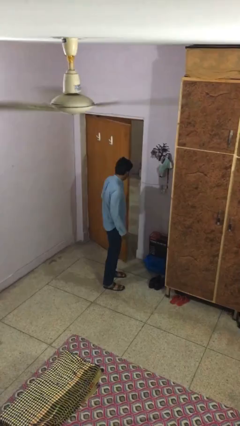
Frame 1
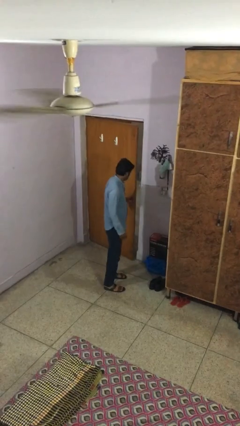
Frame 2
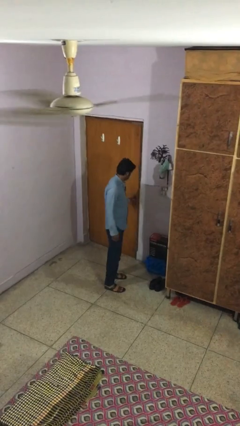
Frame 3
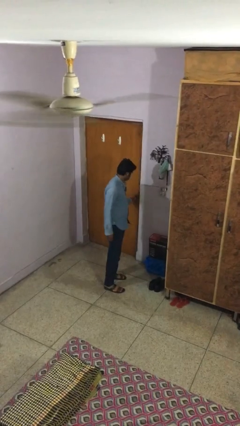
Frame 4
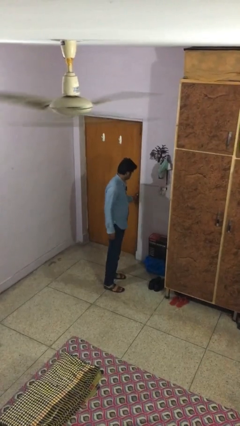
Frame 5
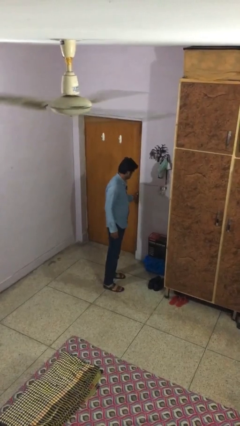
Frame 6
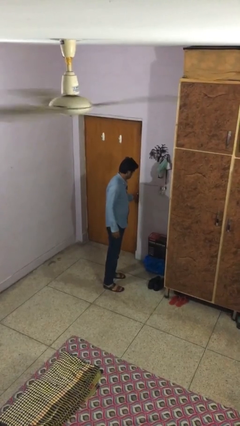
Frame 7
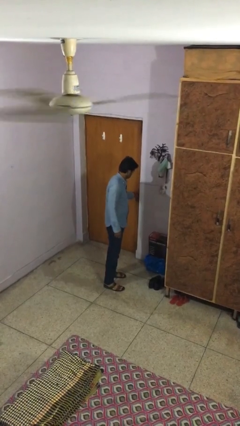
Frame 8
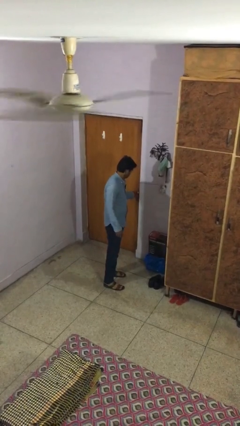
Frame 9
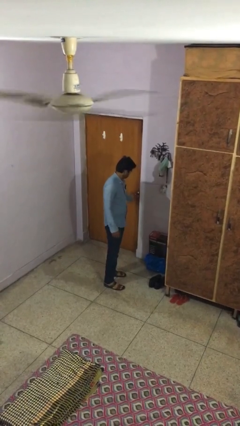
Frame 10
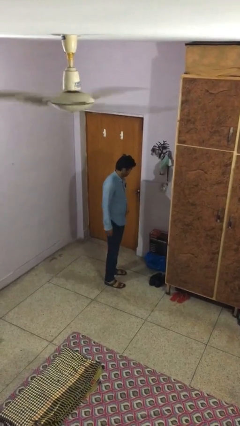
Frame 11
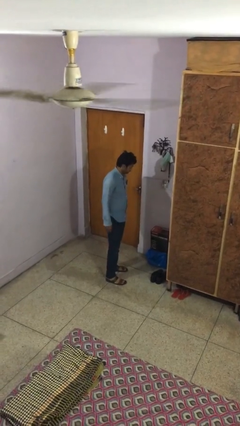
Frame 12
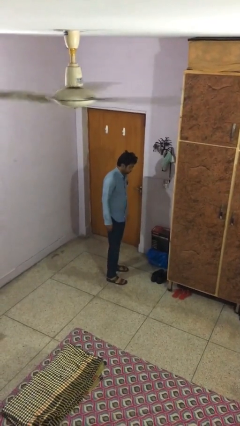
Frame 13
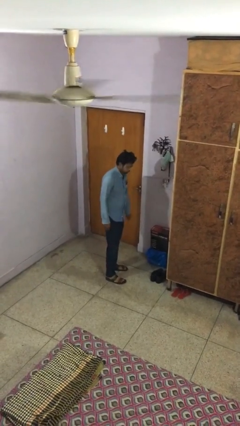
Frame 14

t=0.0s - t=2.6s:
person closes facility door

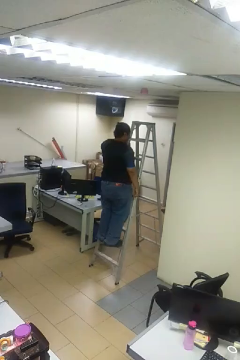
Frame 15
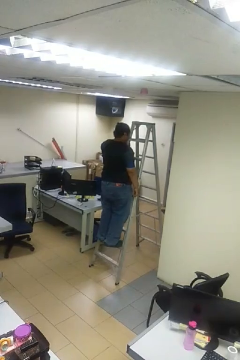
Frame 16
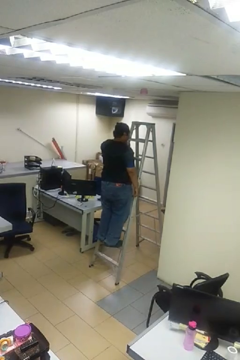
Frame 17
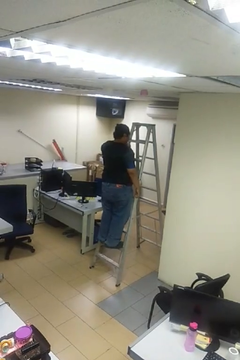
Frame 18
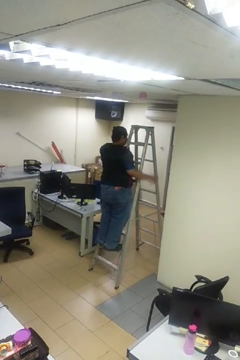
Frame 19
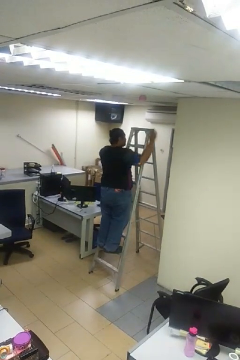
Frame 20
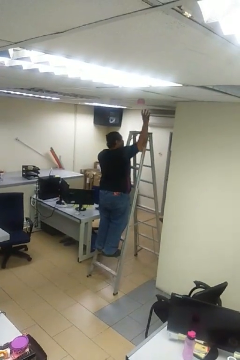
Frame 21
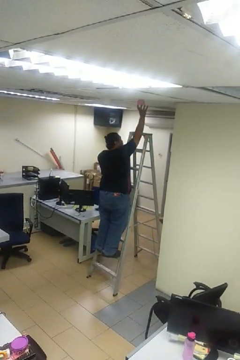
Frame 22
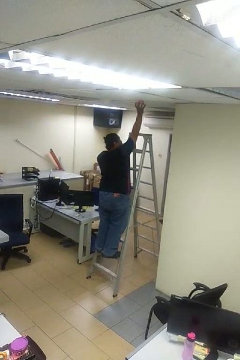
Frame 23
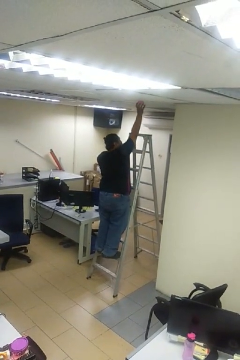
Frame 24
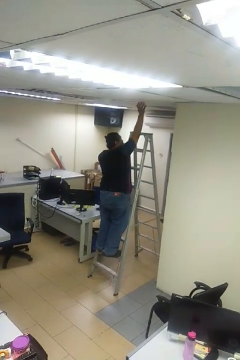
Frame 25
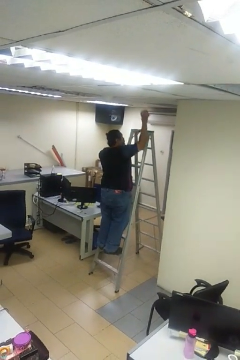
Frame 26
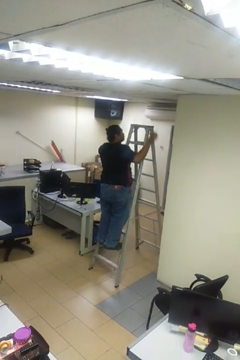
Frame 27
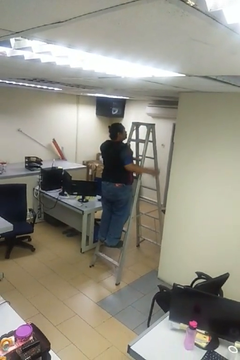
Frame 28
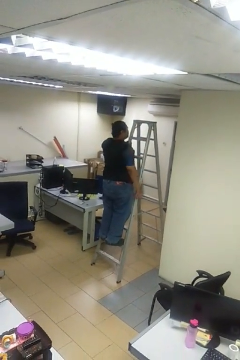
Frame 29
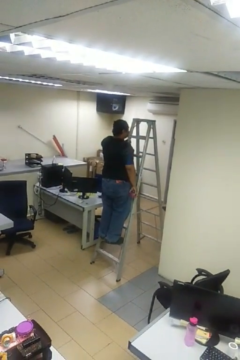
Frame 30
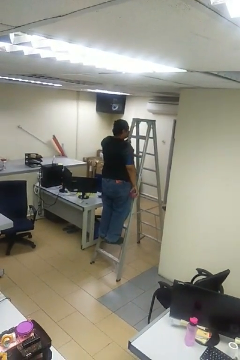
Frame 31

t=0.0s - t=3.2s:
person takes down smoke detector

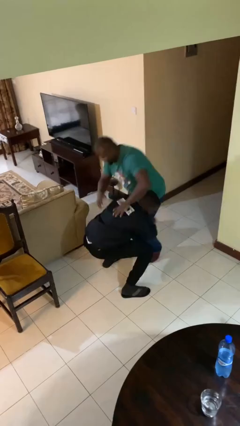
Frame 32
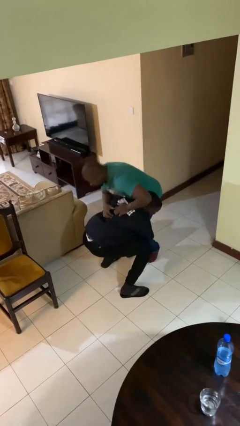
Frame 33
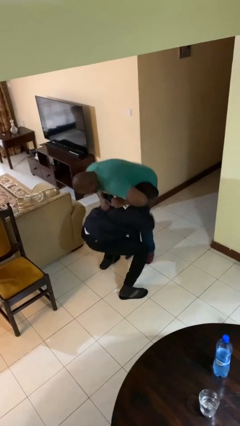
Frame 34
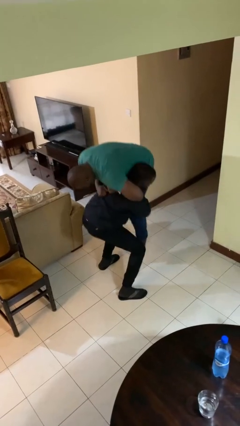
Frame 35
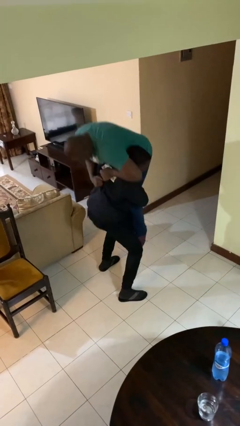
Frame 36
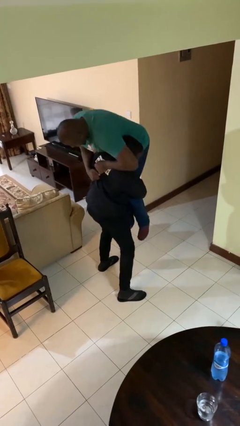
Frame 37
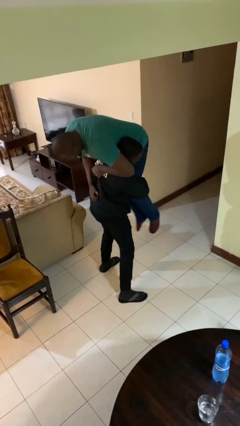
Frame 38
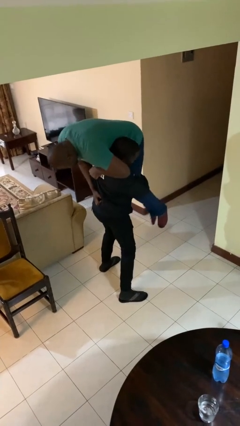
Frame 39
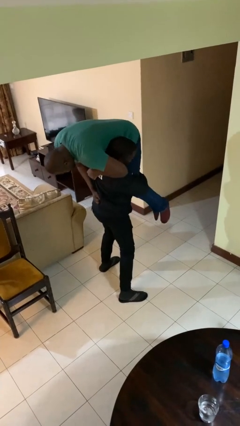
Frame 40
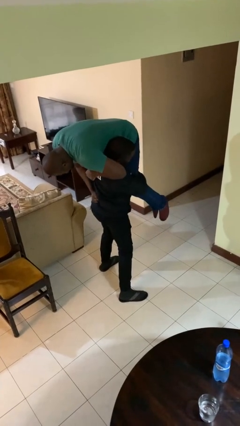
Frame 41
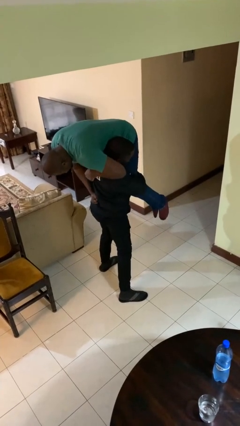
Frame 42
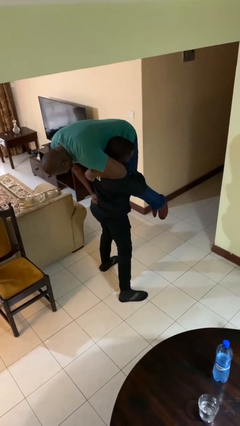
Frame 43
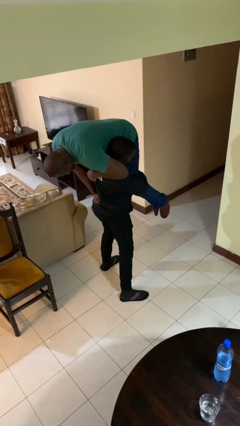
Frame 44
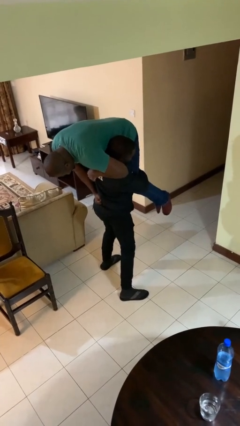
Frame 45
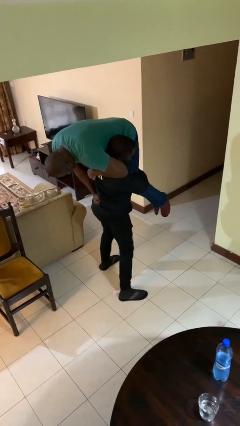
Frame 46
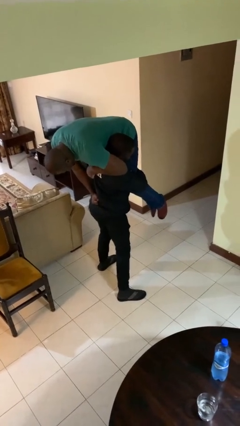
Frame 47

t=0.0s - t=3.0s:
person carries person over shoulder

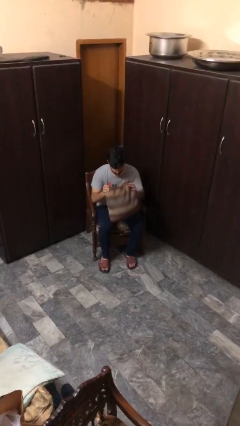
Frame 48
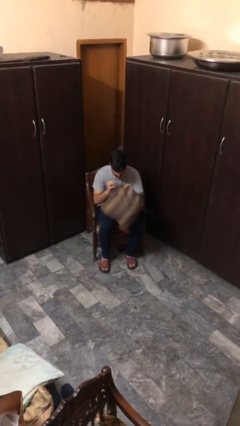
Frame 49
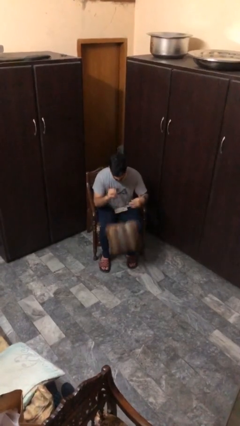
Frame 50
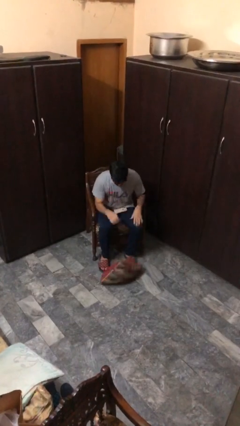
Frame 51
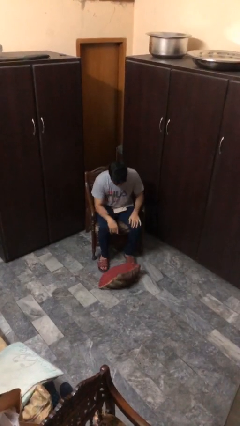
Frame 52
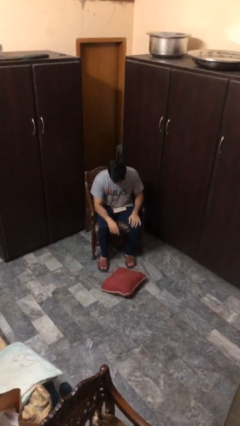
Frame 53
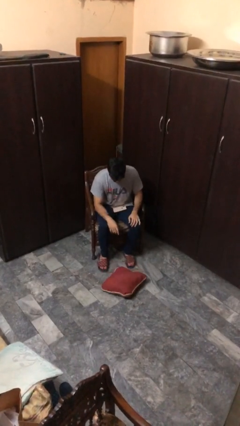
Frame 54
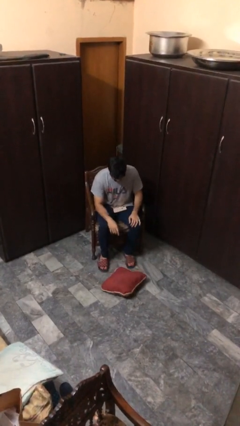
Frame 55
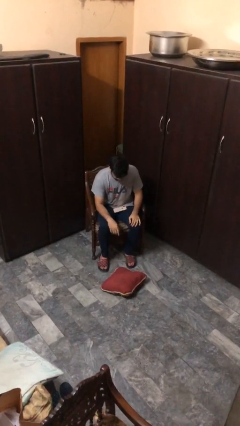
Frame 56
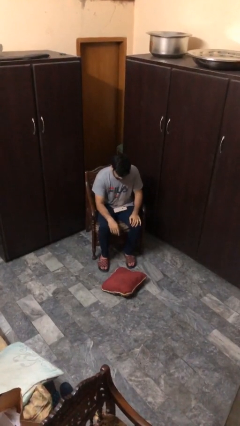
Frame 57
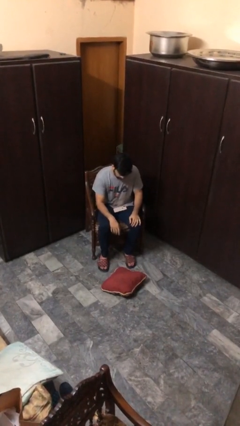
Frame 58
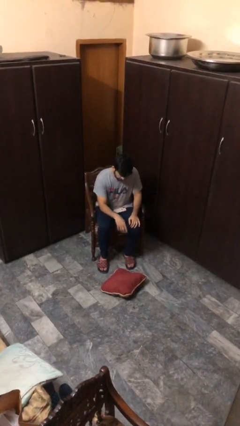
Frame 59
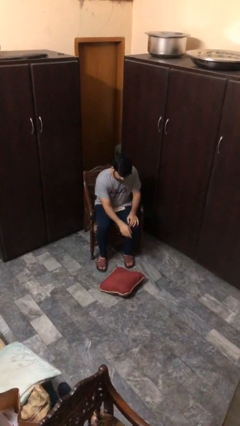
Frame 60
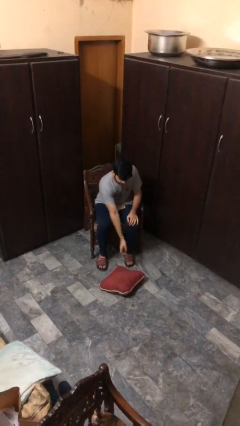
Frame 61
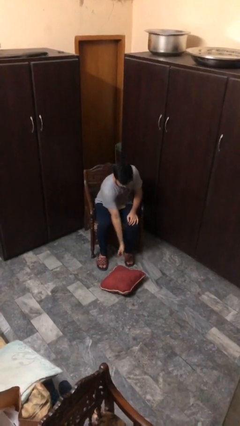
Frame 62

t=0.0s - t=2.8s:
person drops object

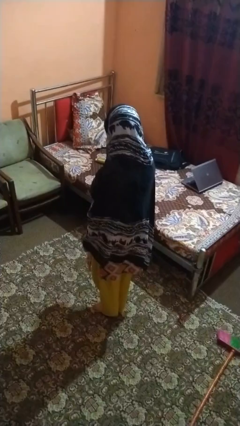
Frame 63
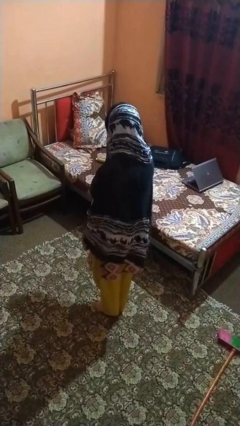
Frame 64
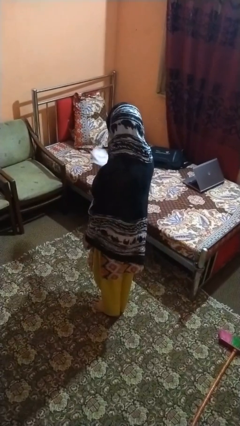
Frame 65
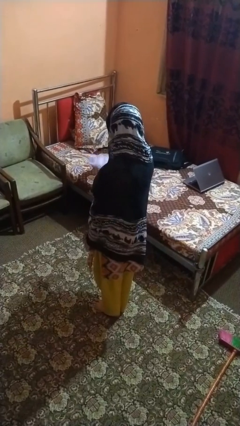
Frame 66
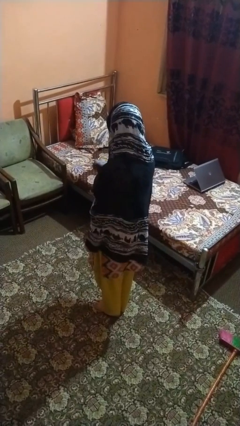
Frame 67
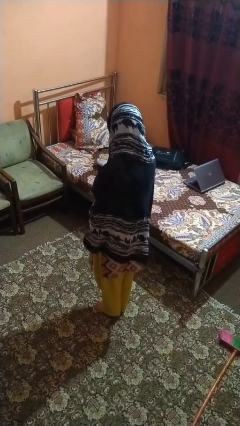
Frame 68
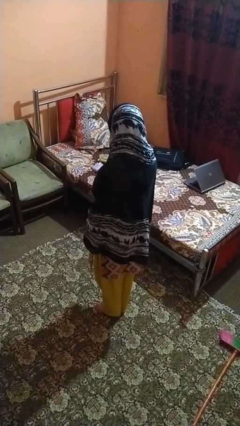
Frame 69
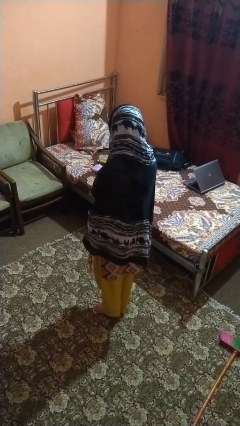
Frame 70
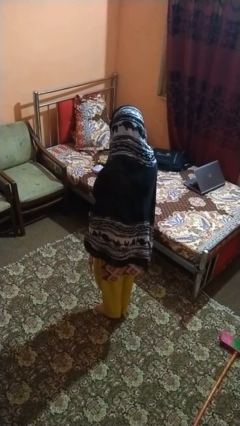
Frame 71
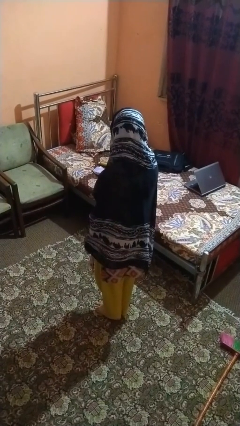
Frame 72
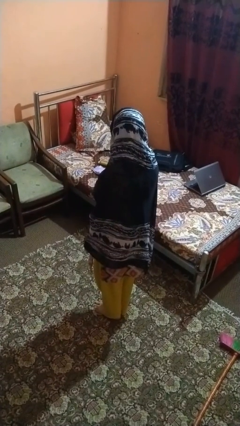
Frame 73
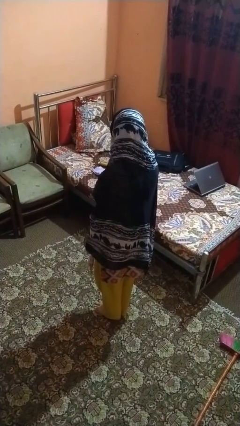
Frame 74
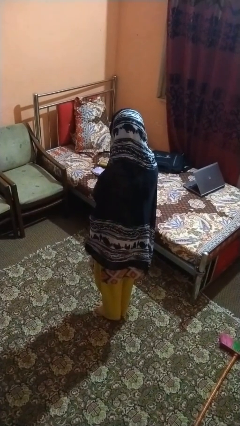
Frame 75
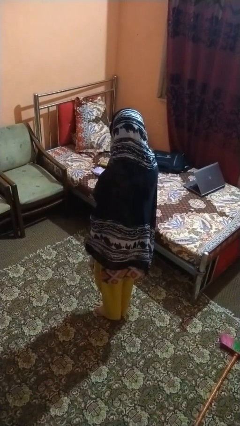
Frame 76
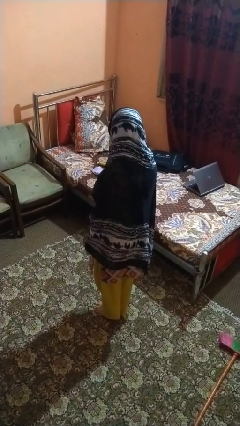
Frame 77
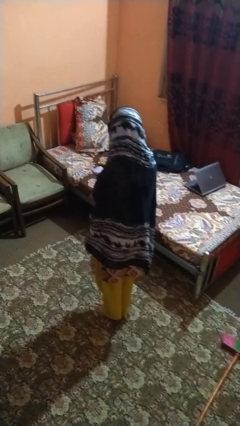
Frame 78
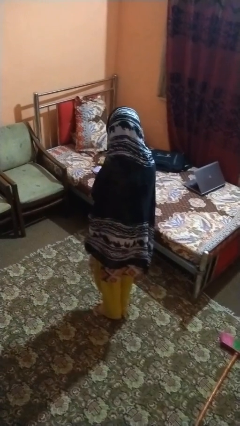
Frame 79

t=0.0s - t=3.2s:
person throws object on bed

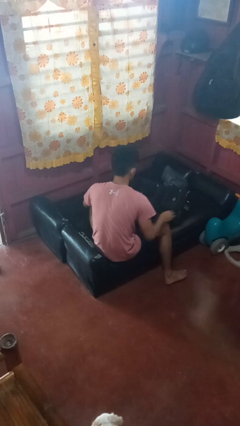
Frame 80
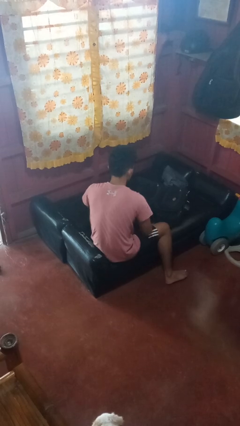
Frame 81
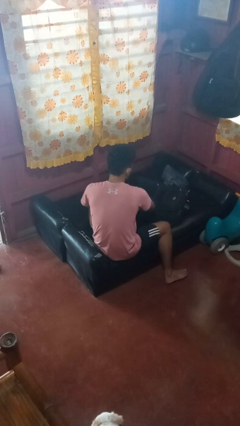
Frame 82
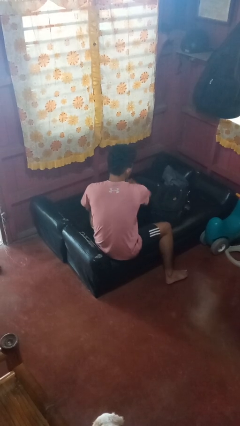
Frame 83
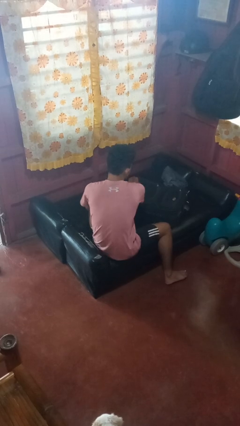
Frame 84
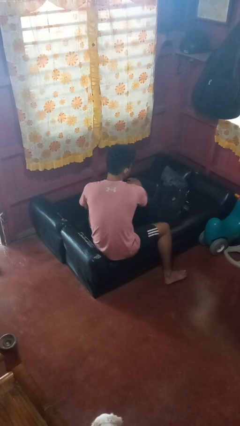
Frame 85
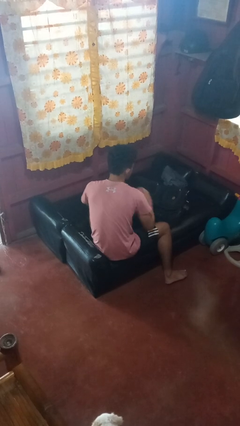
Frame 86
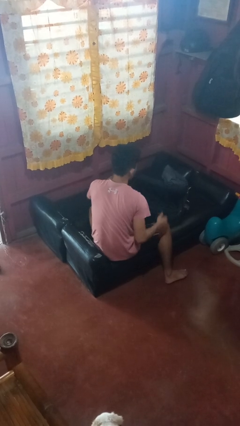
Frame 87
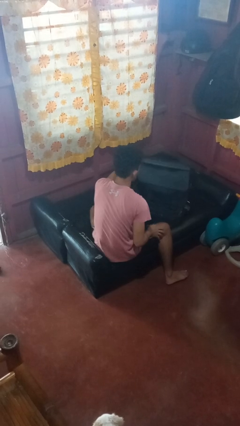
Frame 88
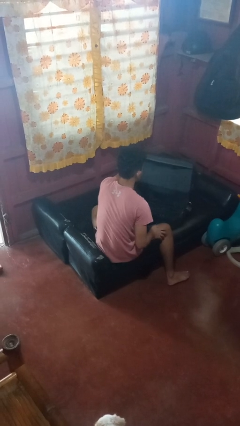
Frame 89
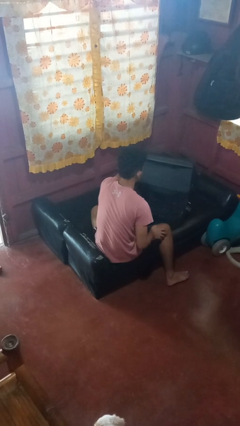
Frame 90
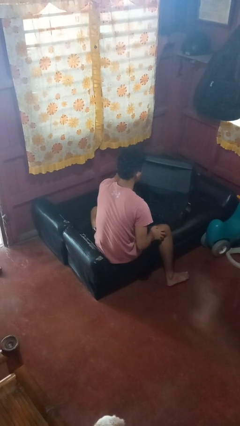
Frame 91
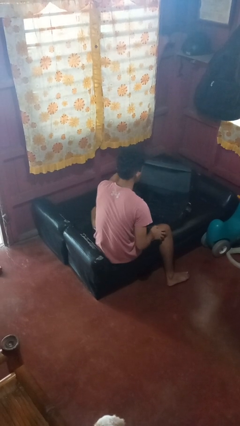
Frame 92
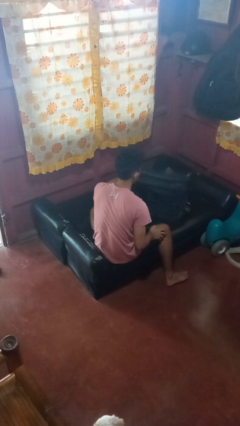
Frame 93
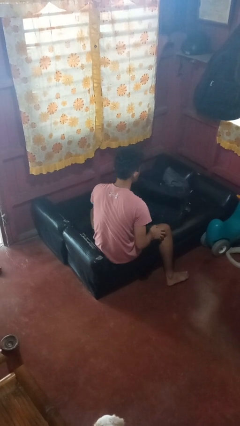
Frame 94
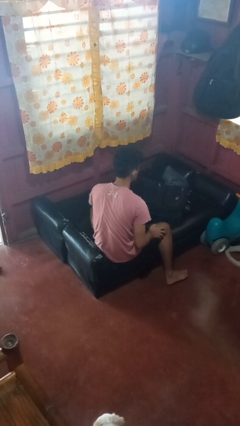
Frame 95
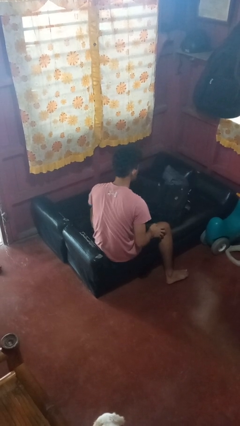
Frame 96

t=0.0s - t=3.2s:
person opens suitcase

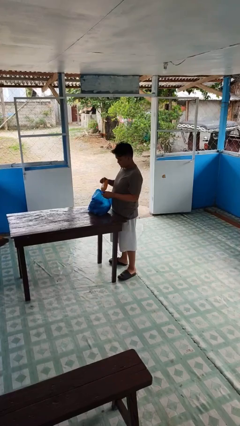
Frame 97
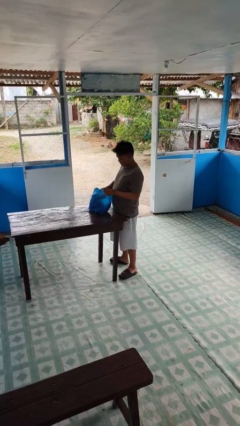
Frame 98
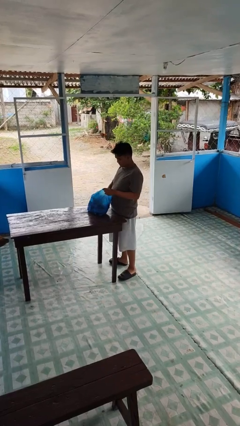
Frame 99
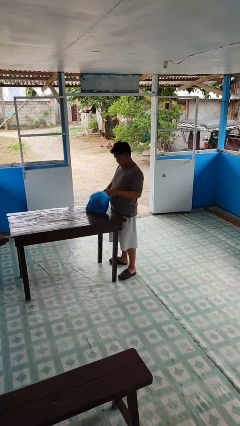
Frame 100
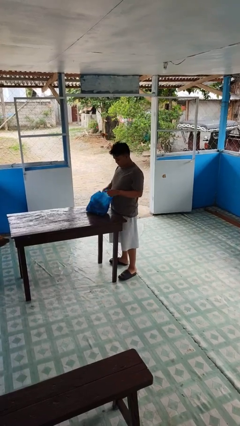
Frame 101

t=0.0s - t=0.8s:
person puts object into bag
